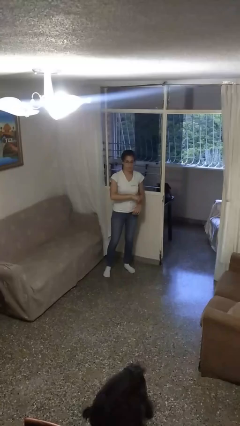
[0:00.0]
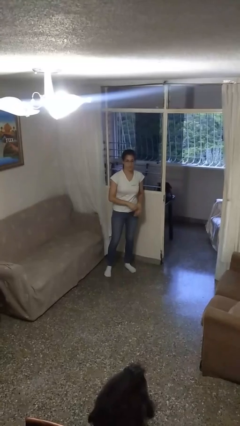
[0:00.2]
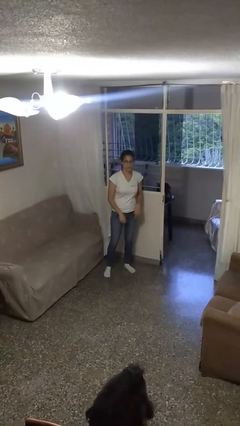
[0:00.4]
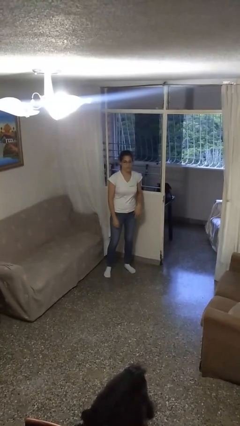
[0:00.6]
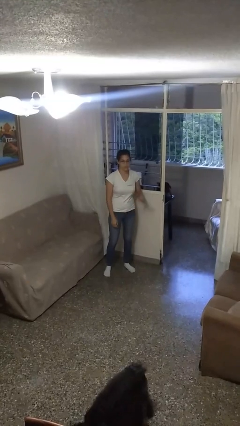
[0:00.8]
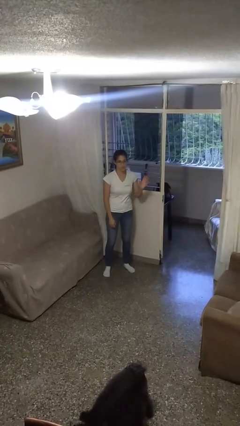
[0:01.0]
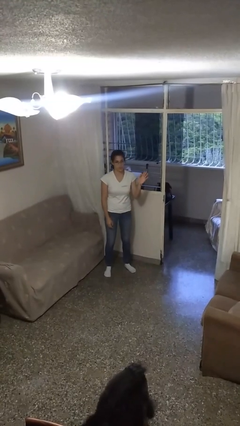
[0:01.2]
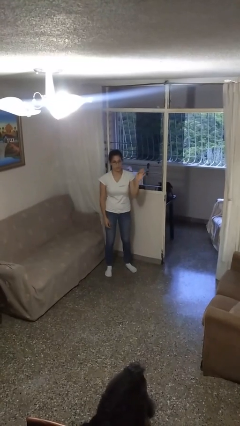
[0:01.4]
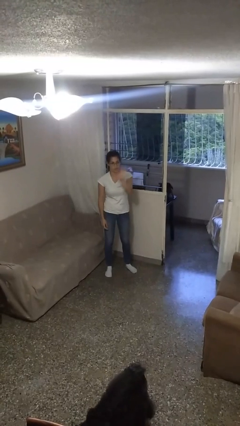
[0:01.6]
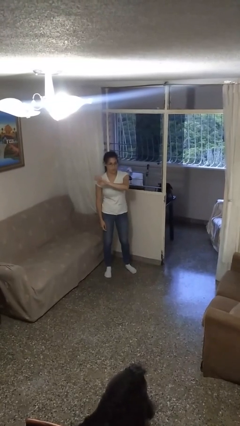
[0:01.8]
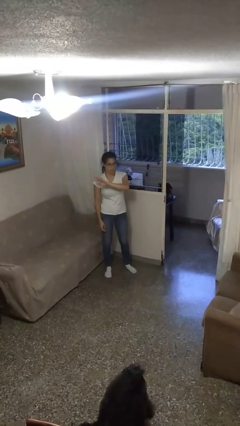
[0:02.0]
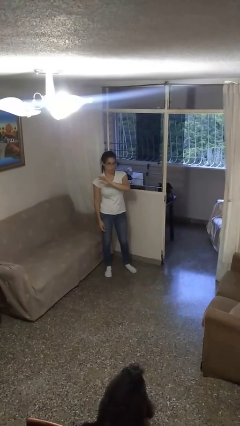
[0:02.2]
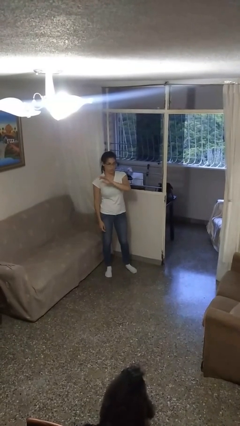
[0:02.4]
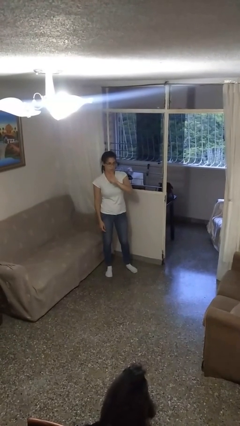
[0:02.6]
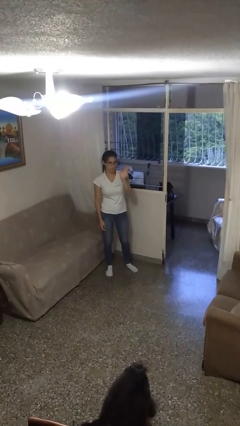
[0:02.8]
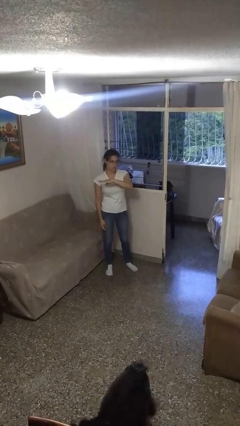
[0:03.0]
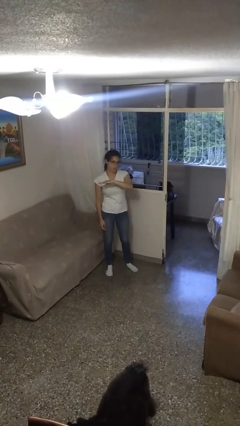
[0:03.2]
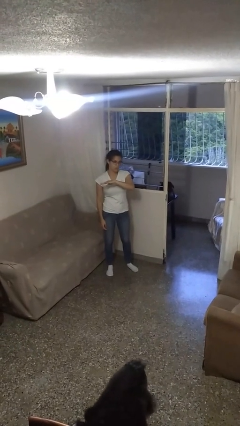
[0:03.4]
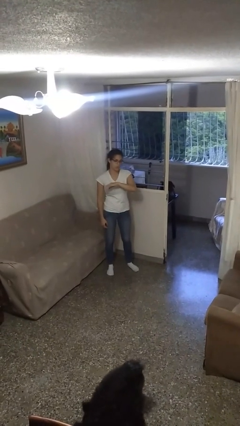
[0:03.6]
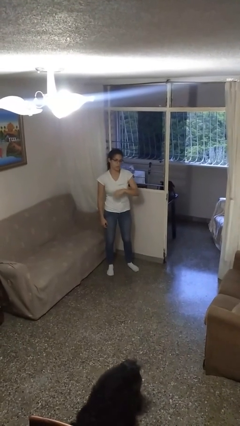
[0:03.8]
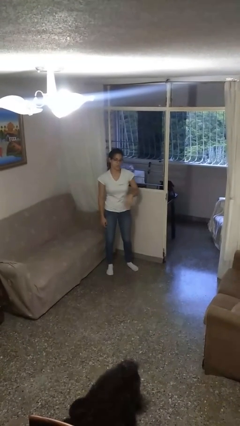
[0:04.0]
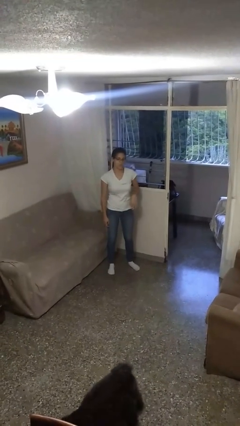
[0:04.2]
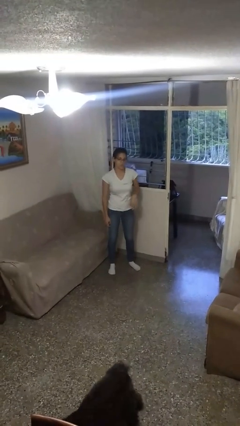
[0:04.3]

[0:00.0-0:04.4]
person gestures swipe right

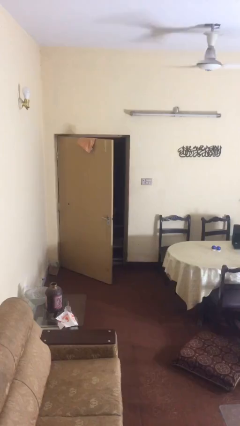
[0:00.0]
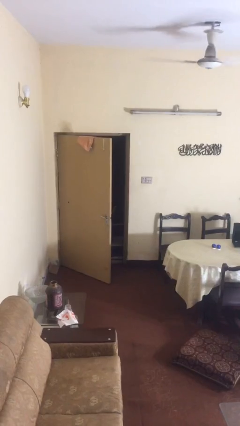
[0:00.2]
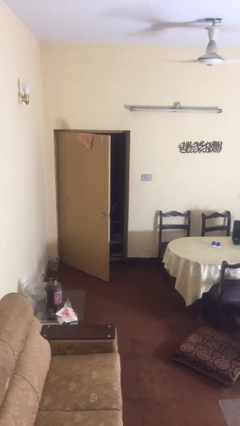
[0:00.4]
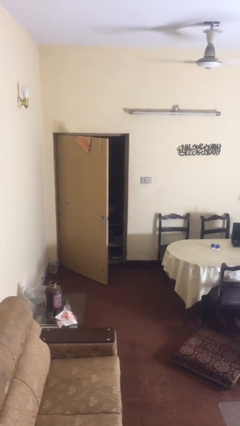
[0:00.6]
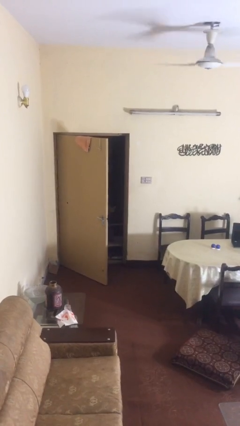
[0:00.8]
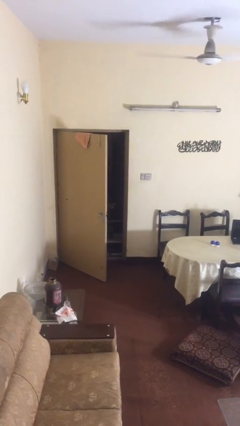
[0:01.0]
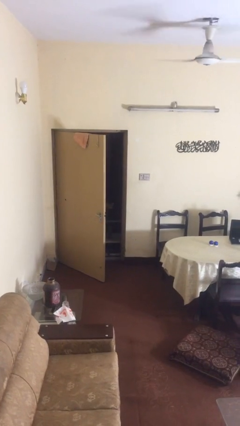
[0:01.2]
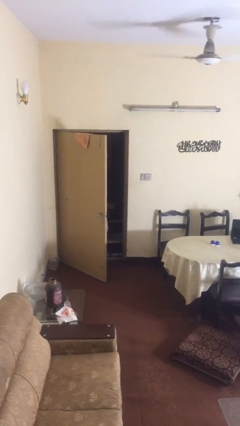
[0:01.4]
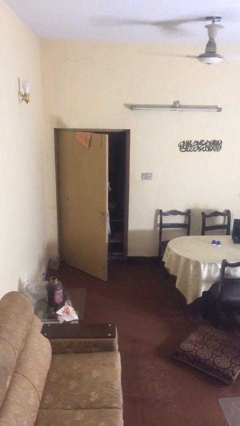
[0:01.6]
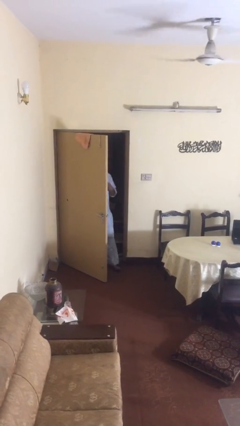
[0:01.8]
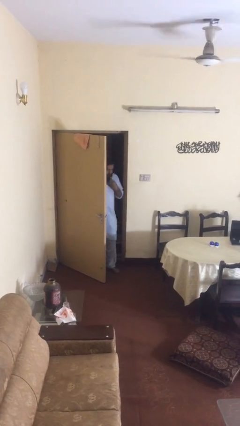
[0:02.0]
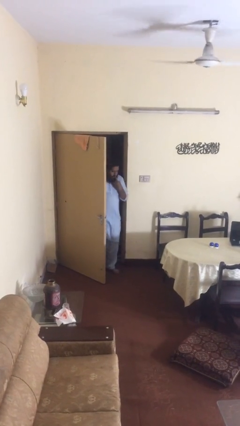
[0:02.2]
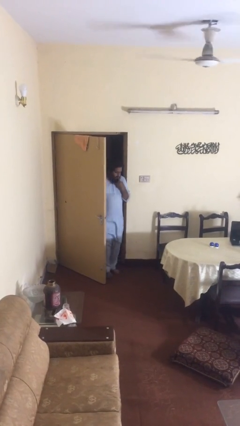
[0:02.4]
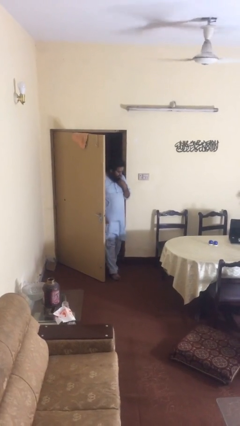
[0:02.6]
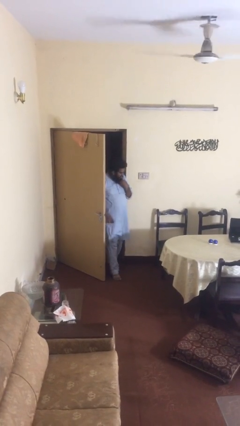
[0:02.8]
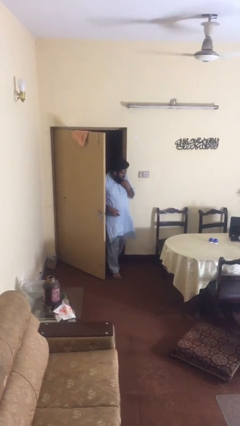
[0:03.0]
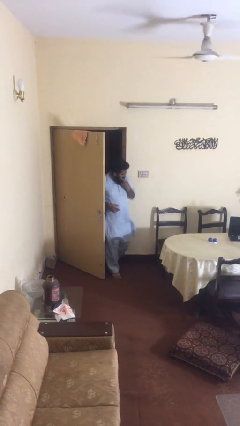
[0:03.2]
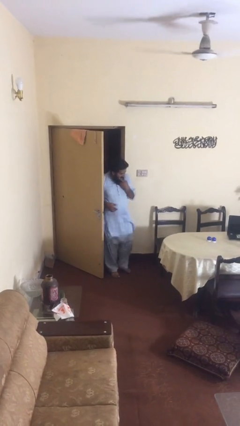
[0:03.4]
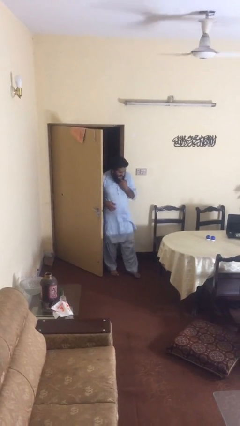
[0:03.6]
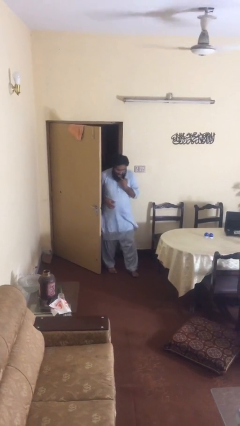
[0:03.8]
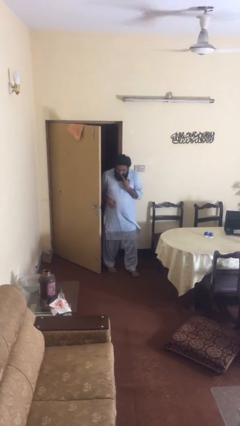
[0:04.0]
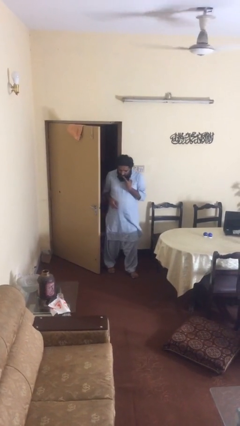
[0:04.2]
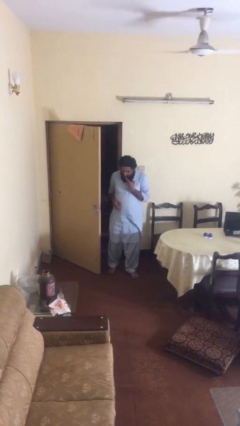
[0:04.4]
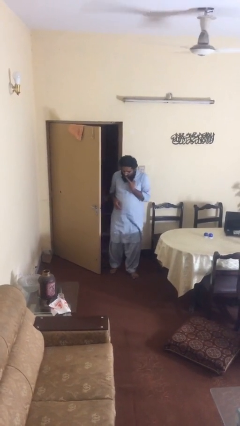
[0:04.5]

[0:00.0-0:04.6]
person enters scene through structure

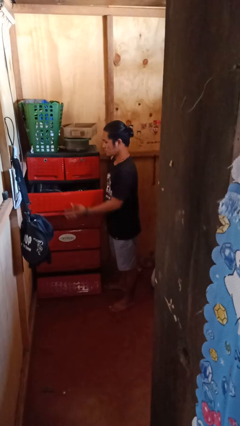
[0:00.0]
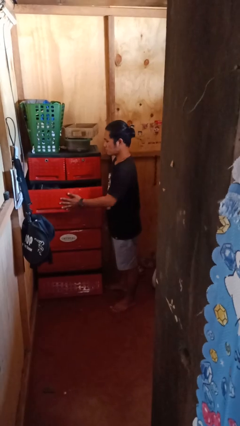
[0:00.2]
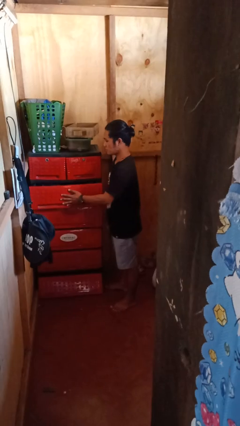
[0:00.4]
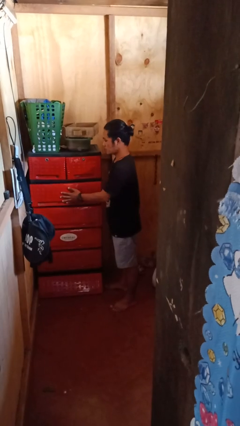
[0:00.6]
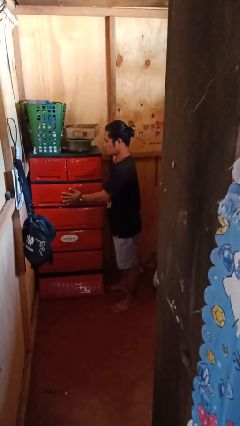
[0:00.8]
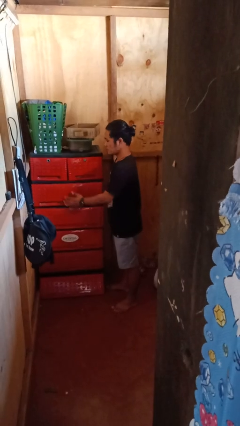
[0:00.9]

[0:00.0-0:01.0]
person closes dresser drawer

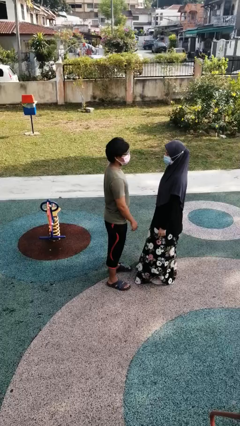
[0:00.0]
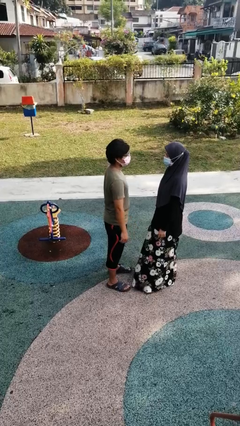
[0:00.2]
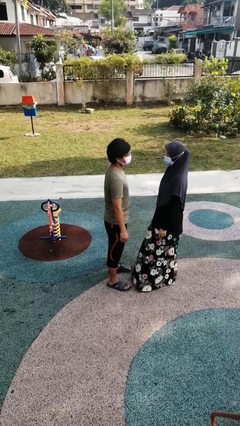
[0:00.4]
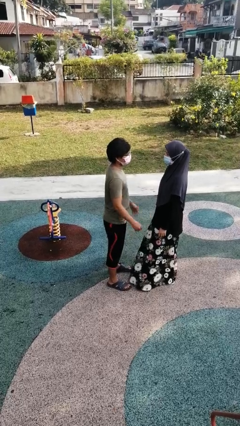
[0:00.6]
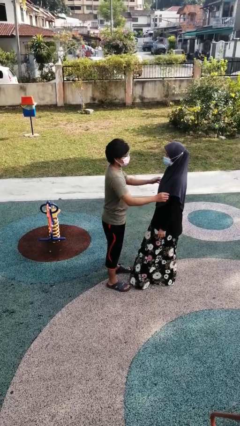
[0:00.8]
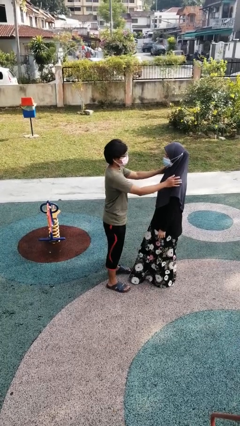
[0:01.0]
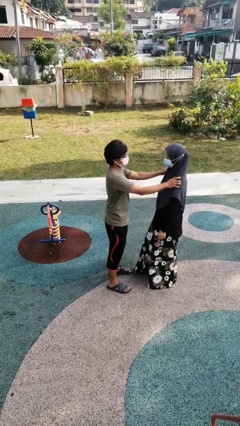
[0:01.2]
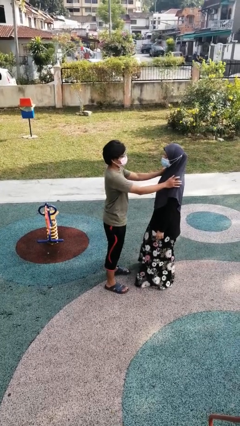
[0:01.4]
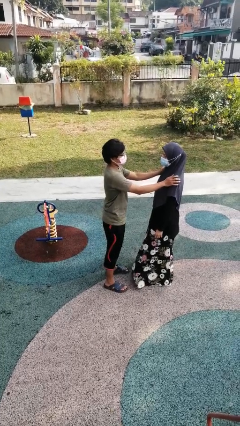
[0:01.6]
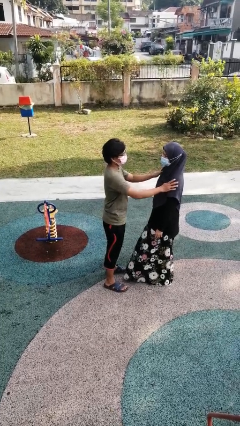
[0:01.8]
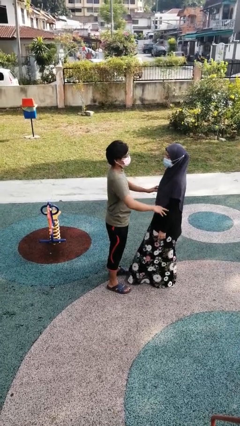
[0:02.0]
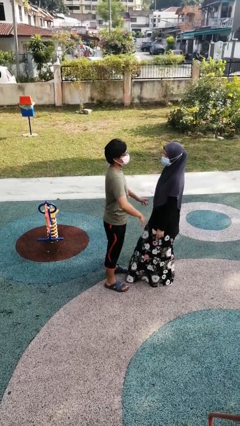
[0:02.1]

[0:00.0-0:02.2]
person pounds shoulders of person

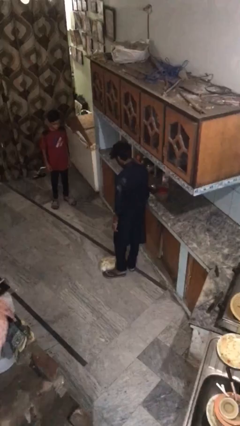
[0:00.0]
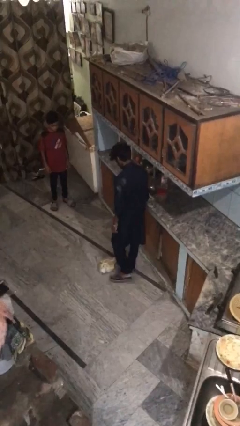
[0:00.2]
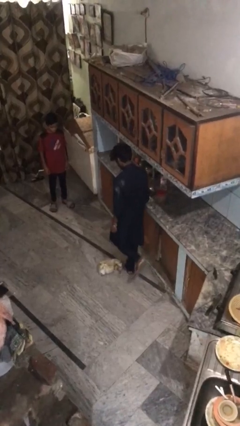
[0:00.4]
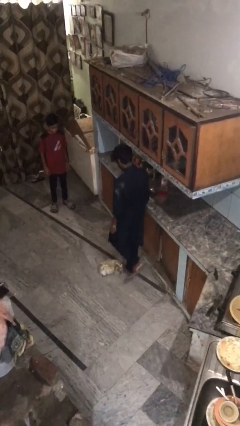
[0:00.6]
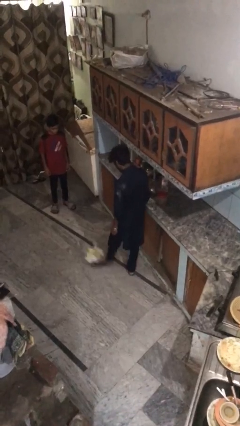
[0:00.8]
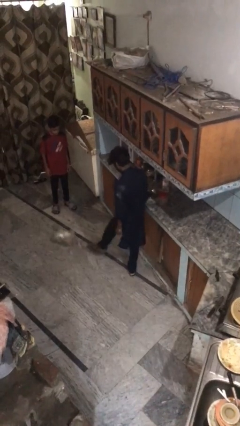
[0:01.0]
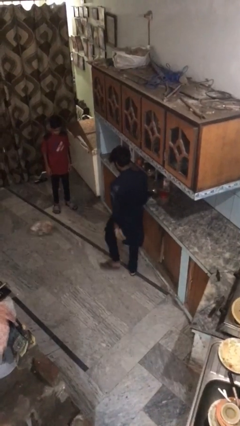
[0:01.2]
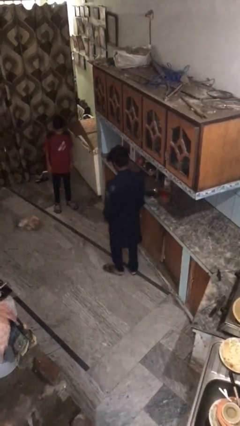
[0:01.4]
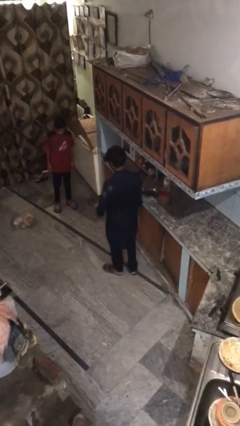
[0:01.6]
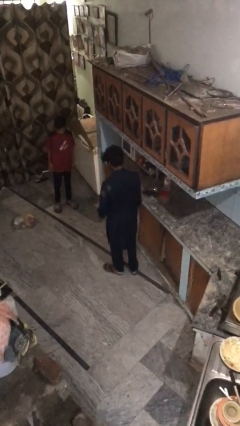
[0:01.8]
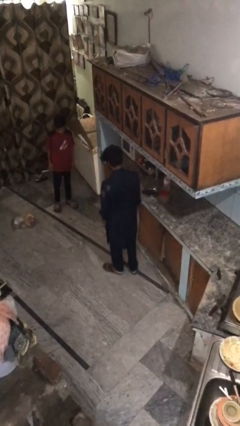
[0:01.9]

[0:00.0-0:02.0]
person kicks object to person

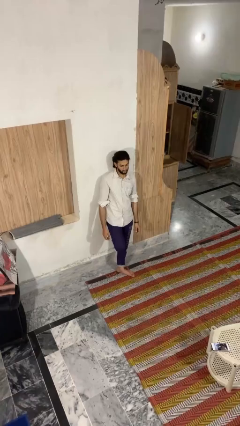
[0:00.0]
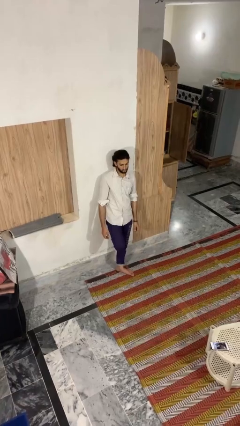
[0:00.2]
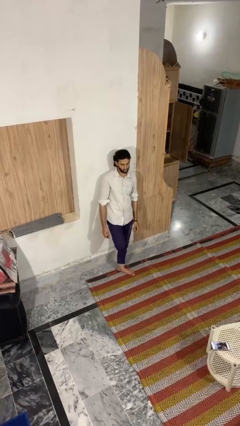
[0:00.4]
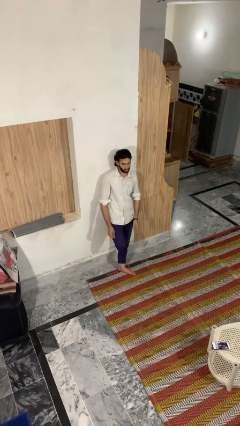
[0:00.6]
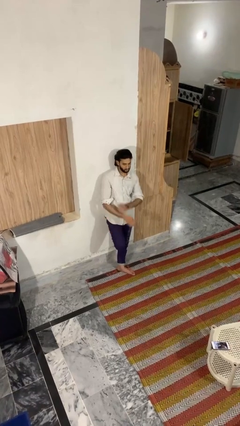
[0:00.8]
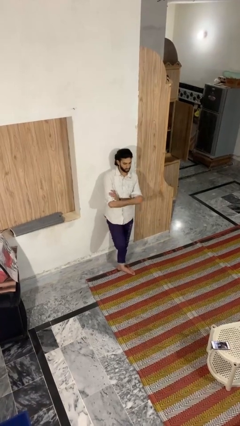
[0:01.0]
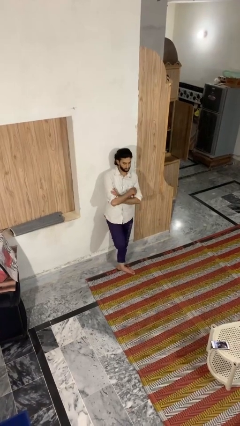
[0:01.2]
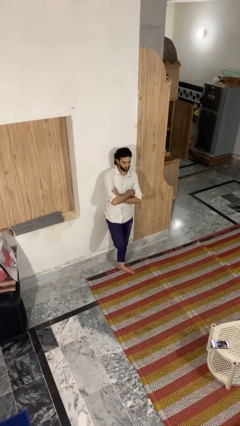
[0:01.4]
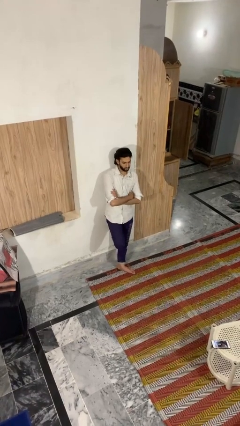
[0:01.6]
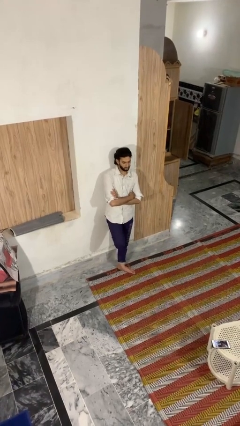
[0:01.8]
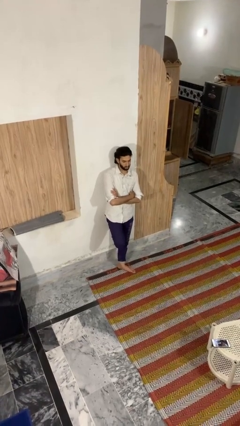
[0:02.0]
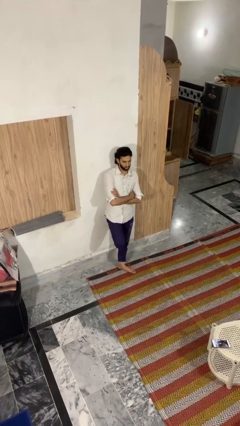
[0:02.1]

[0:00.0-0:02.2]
person crosses arms

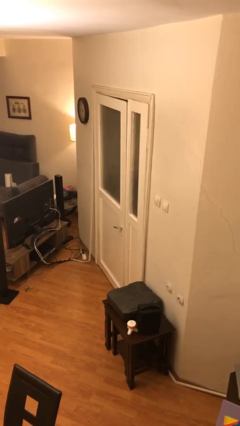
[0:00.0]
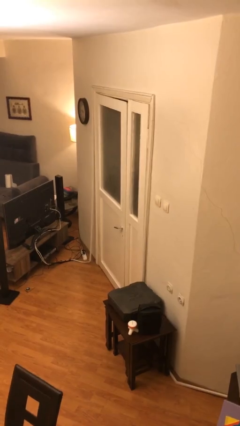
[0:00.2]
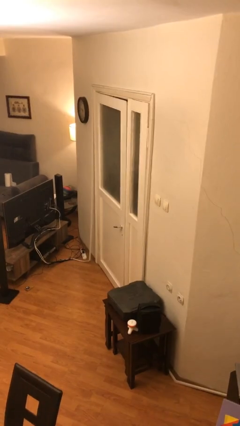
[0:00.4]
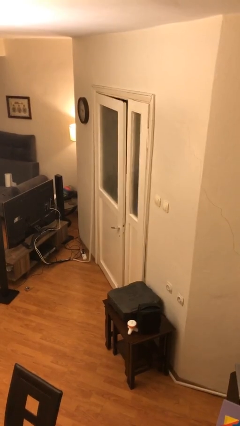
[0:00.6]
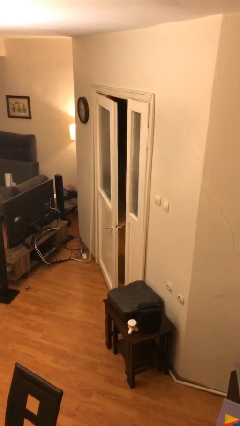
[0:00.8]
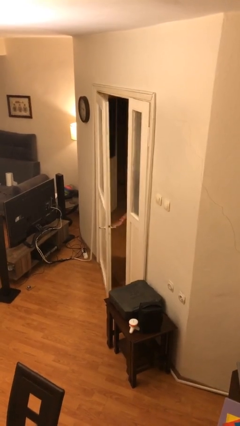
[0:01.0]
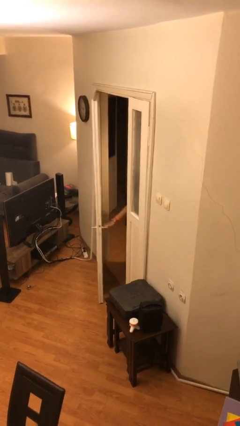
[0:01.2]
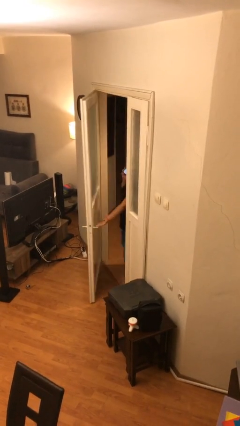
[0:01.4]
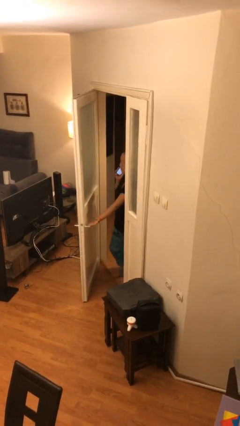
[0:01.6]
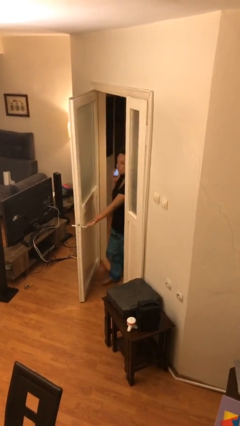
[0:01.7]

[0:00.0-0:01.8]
person opens facility door
